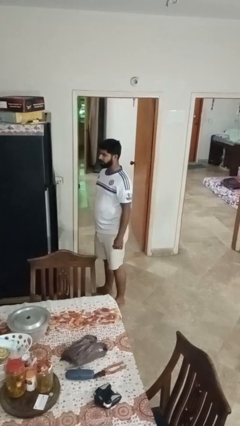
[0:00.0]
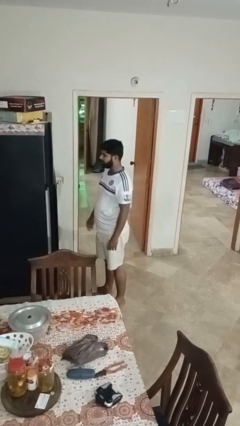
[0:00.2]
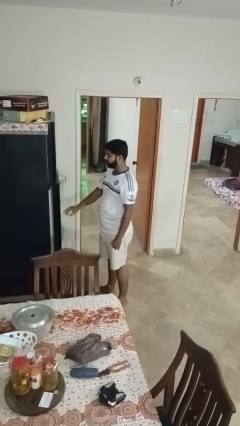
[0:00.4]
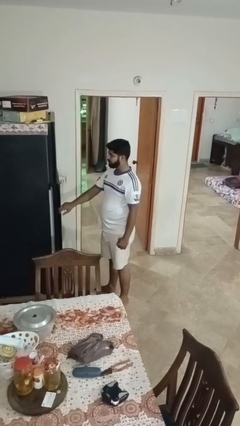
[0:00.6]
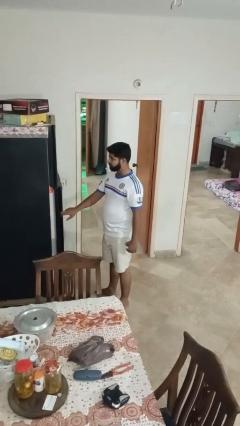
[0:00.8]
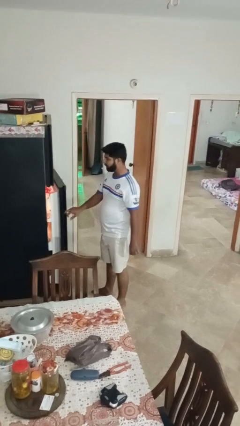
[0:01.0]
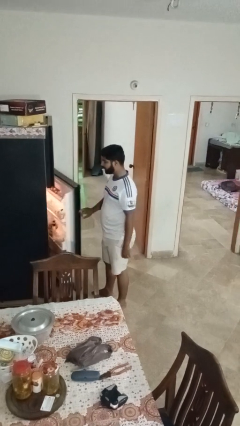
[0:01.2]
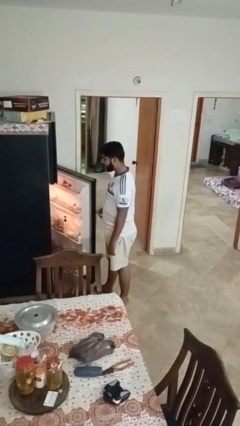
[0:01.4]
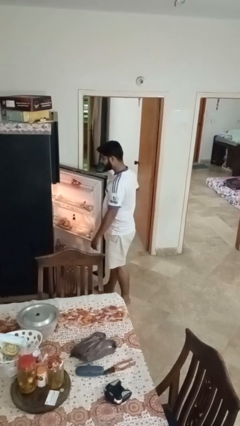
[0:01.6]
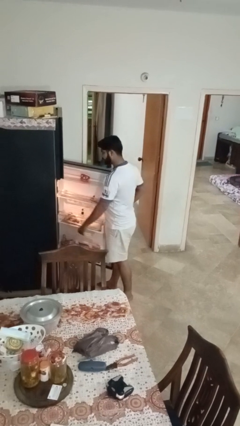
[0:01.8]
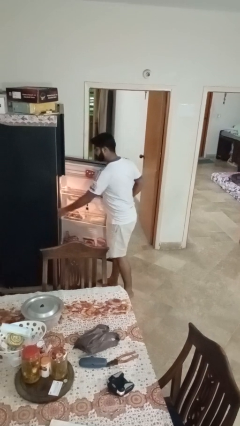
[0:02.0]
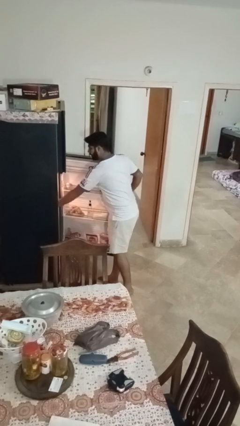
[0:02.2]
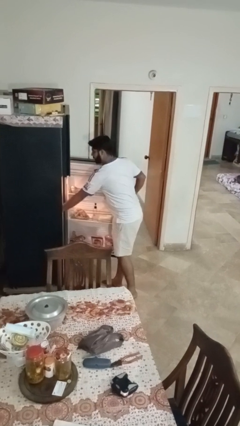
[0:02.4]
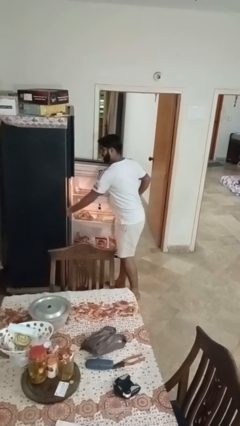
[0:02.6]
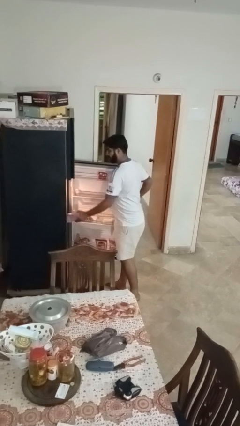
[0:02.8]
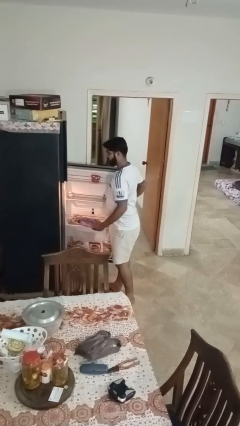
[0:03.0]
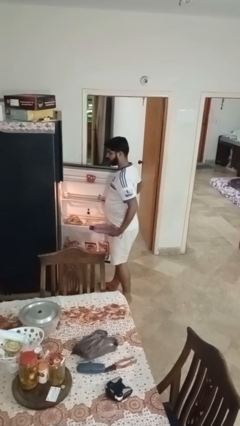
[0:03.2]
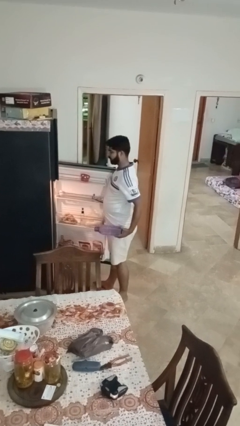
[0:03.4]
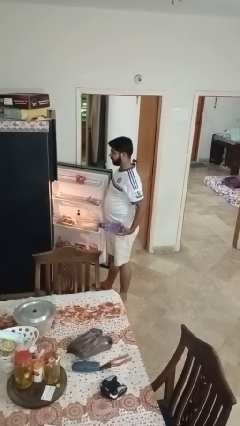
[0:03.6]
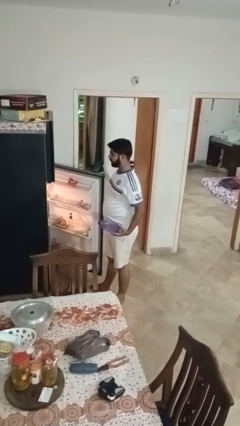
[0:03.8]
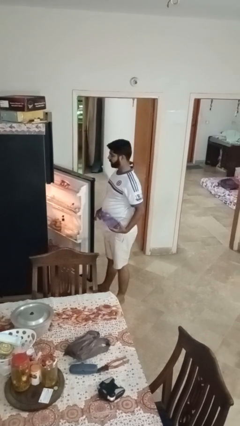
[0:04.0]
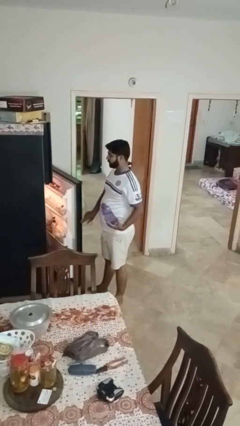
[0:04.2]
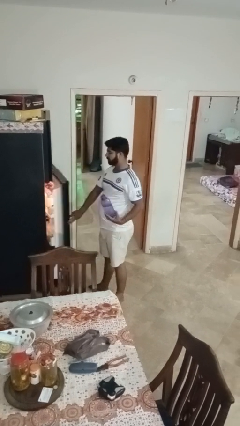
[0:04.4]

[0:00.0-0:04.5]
person takes object from refrigerator

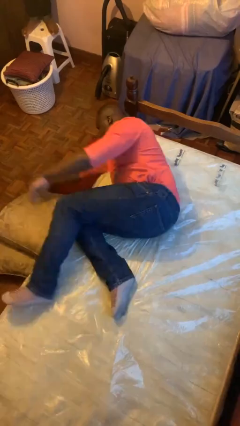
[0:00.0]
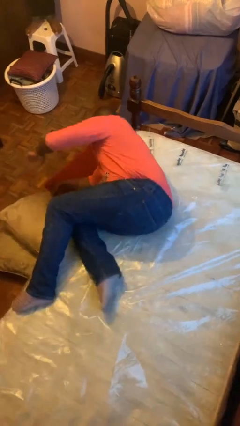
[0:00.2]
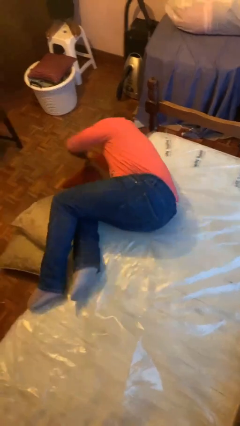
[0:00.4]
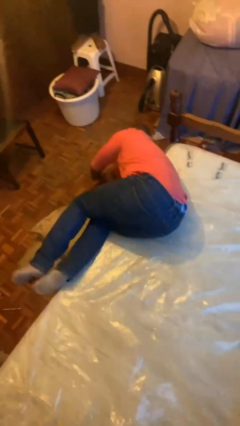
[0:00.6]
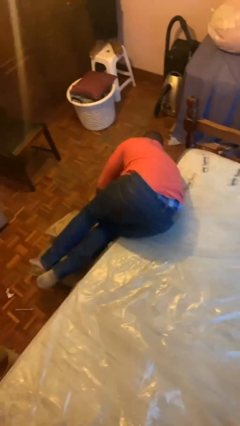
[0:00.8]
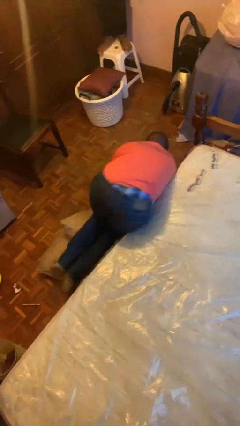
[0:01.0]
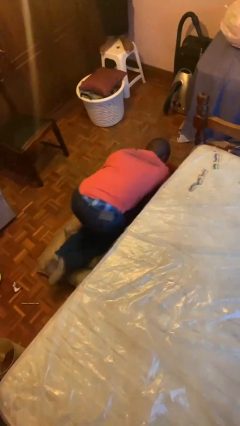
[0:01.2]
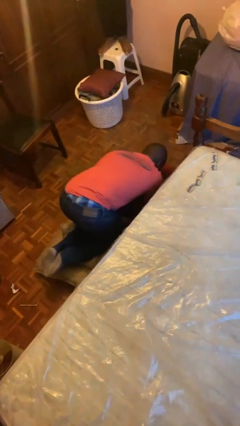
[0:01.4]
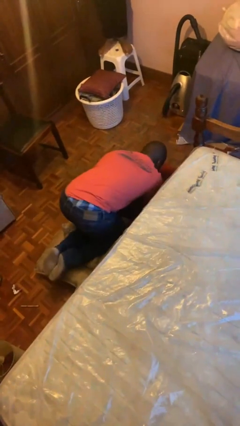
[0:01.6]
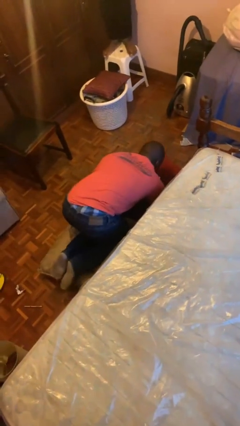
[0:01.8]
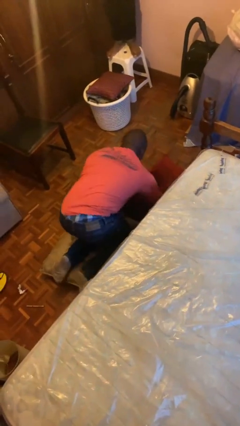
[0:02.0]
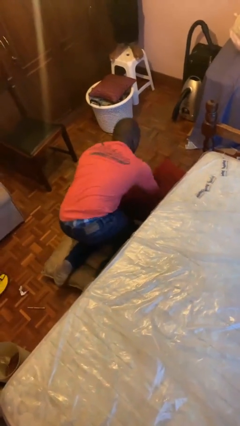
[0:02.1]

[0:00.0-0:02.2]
person falls from bed

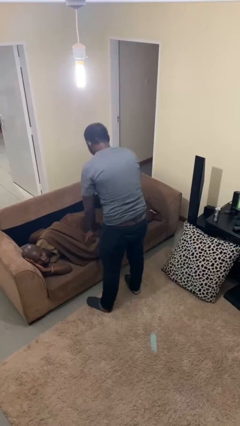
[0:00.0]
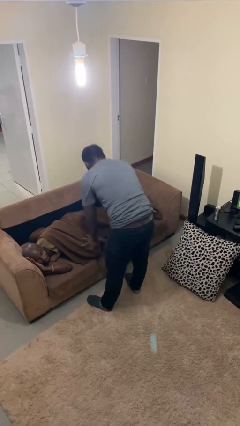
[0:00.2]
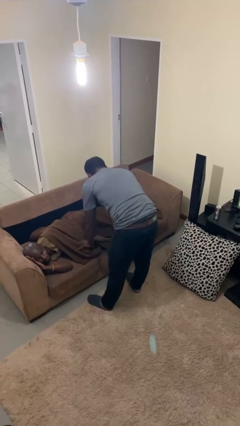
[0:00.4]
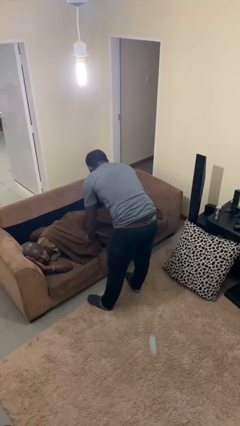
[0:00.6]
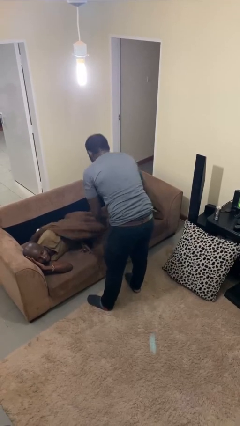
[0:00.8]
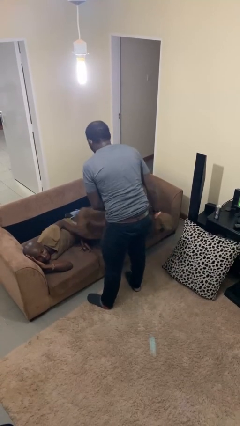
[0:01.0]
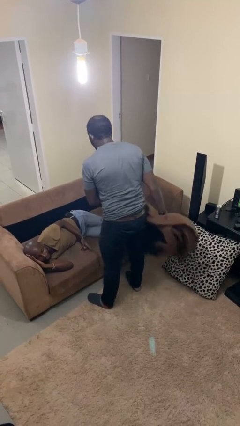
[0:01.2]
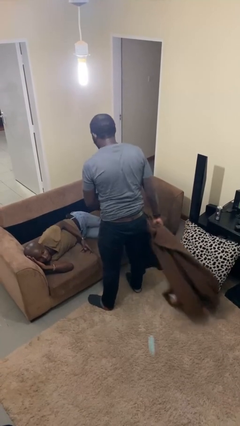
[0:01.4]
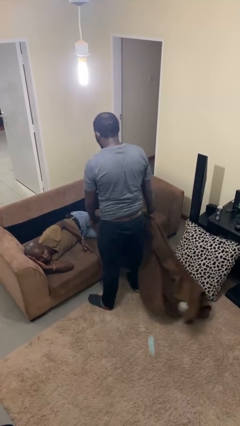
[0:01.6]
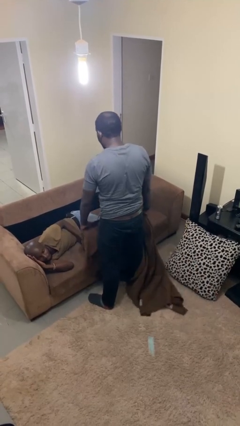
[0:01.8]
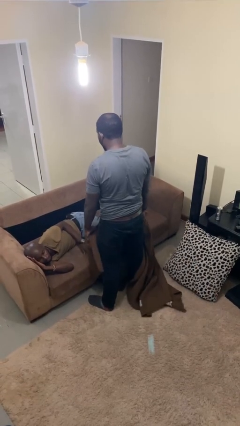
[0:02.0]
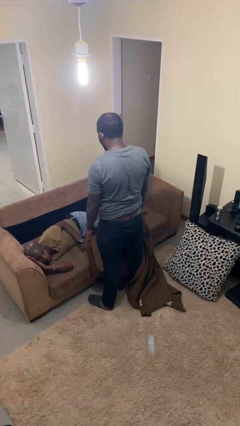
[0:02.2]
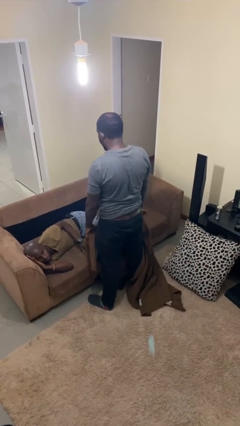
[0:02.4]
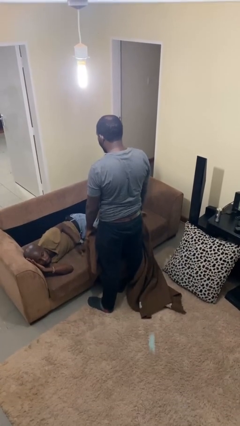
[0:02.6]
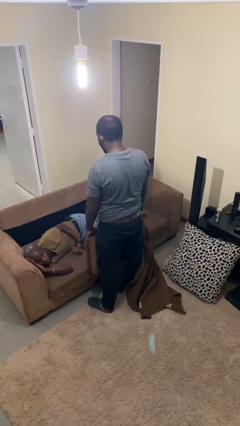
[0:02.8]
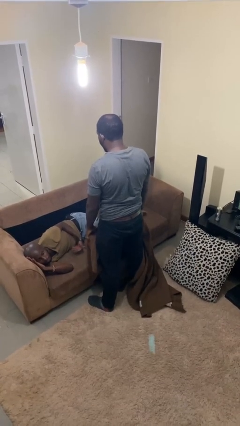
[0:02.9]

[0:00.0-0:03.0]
person uncovers friend with blanket

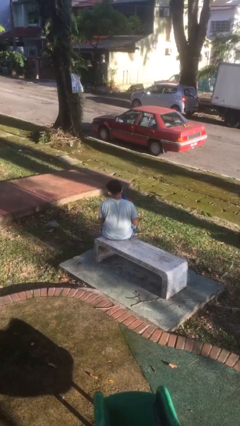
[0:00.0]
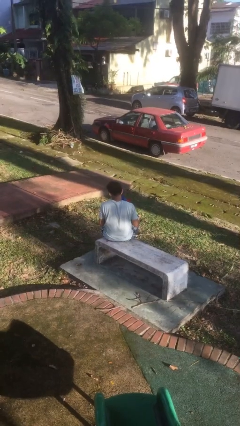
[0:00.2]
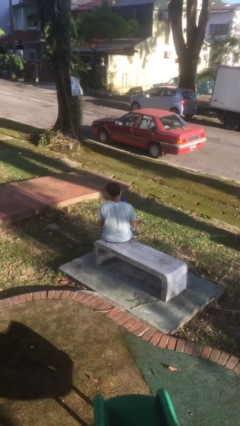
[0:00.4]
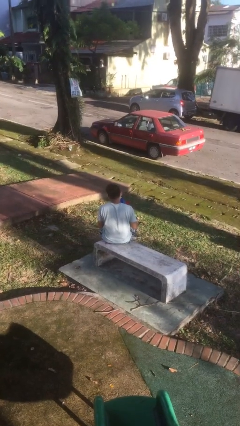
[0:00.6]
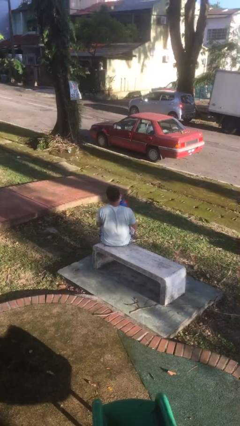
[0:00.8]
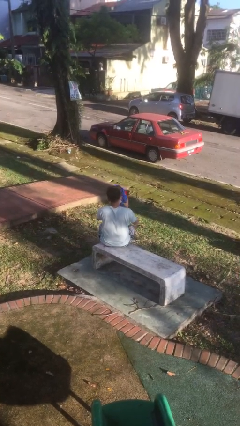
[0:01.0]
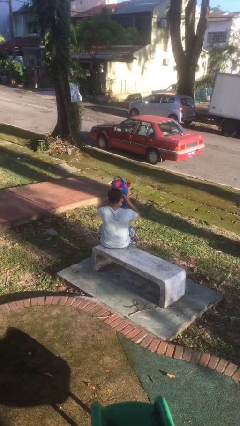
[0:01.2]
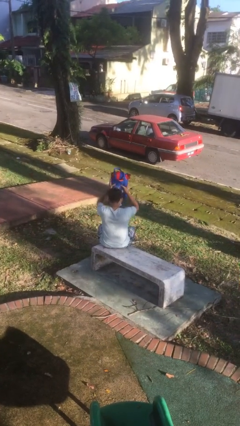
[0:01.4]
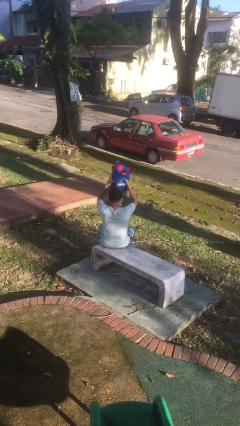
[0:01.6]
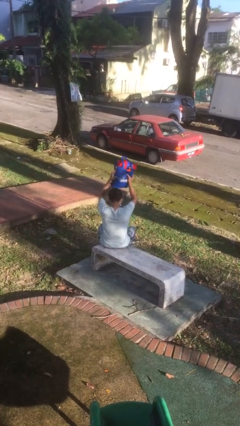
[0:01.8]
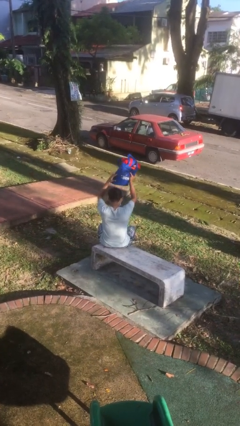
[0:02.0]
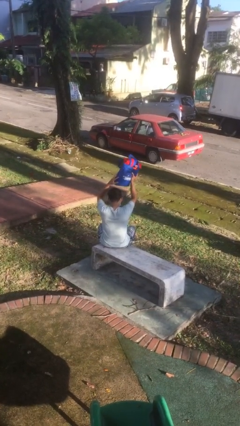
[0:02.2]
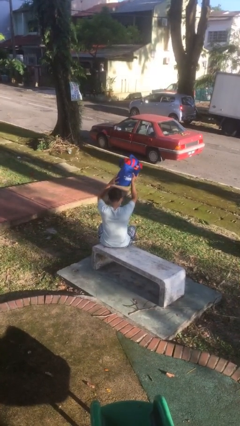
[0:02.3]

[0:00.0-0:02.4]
person holds object above head

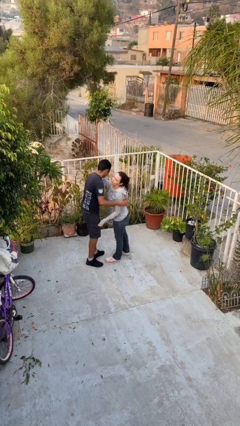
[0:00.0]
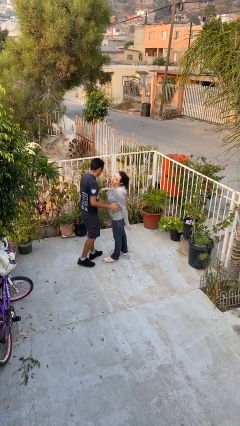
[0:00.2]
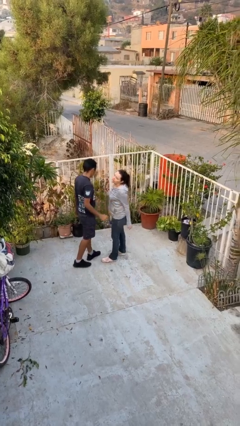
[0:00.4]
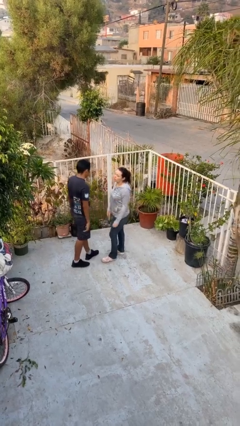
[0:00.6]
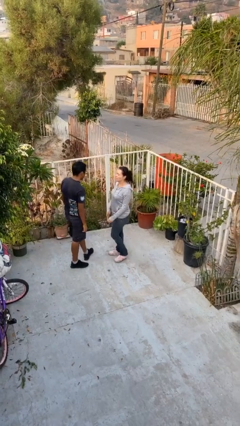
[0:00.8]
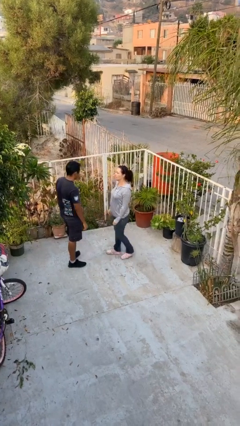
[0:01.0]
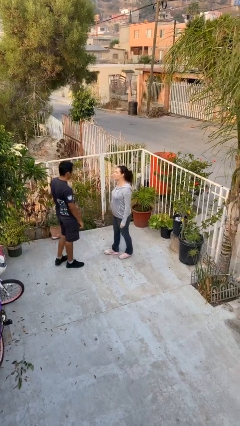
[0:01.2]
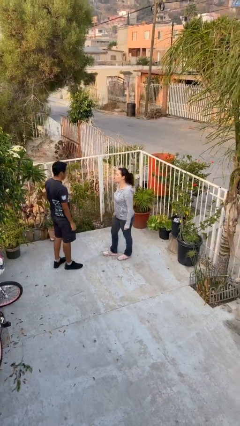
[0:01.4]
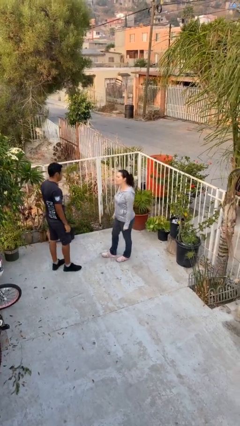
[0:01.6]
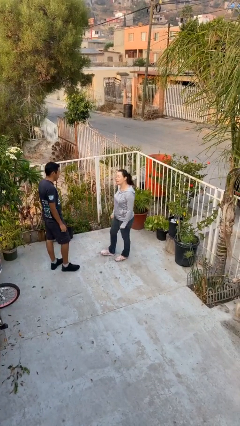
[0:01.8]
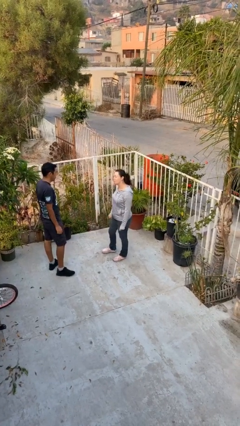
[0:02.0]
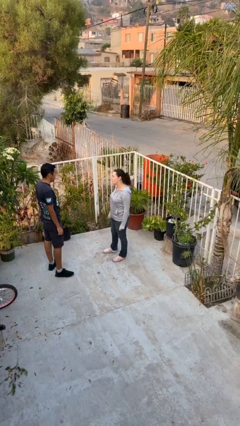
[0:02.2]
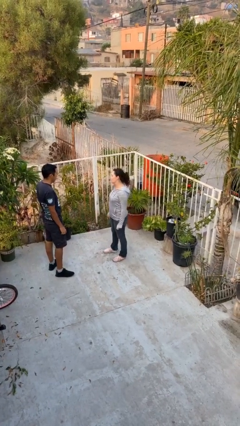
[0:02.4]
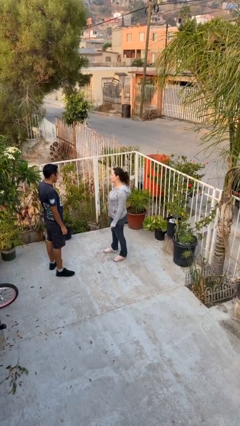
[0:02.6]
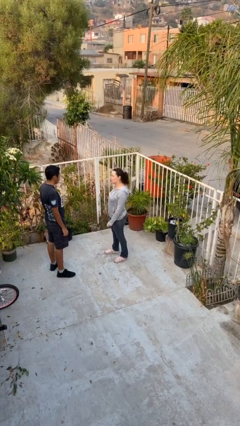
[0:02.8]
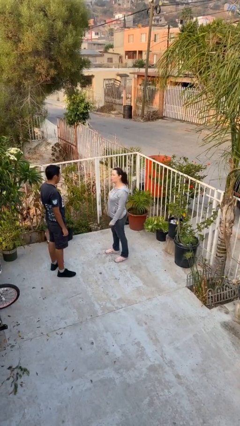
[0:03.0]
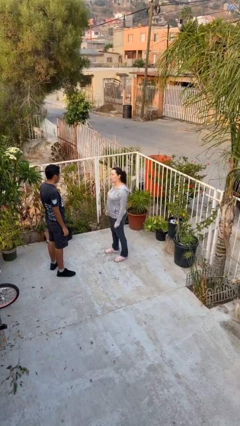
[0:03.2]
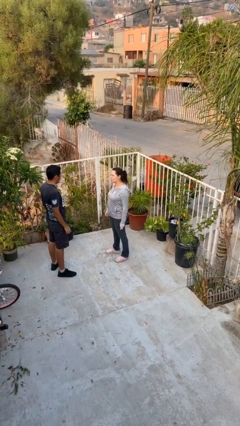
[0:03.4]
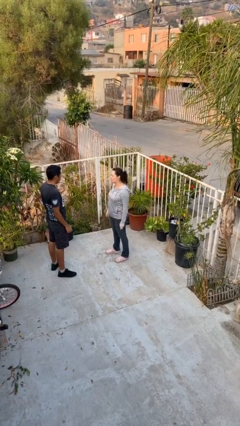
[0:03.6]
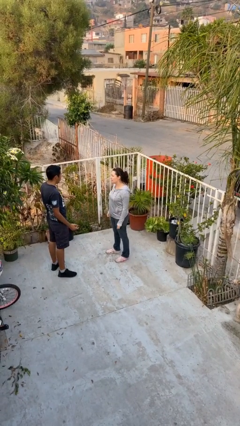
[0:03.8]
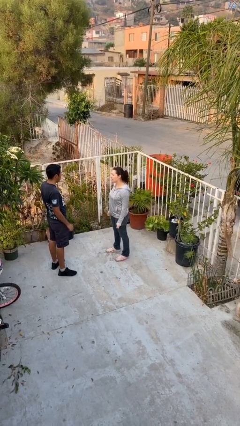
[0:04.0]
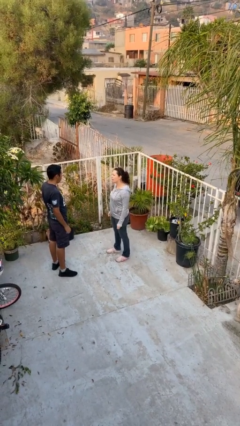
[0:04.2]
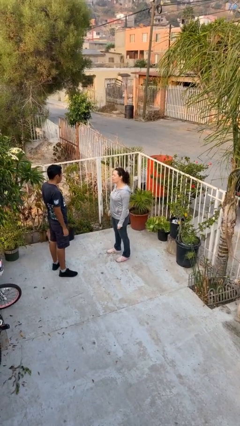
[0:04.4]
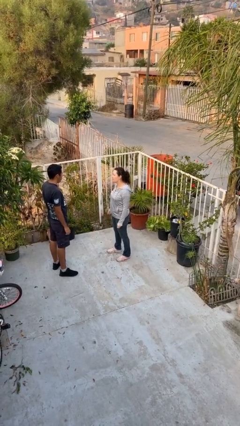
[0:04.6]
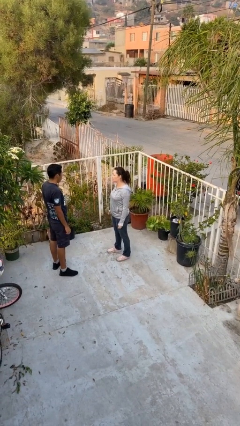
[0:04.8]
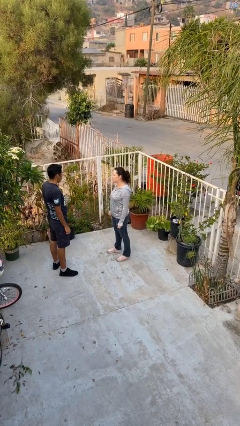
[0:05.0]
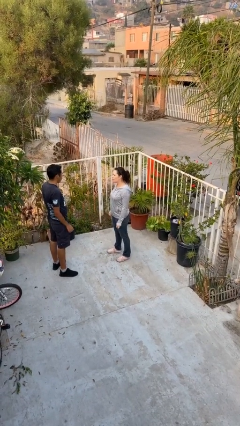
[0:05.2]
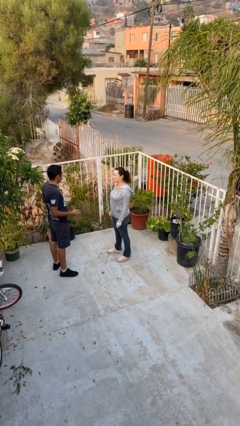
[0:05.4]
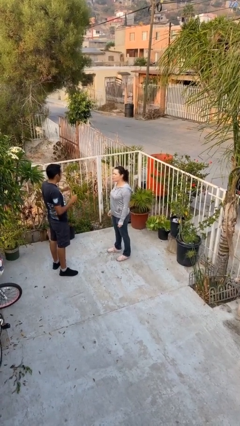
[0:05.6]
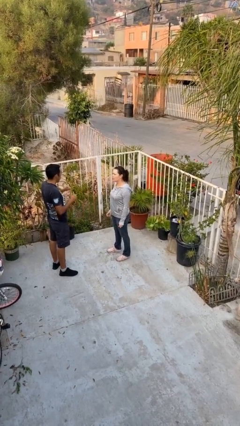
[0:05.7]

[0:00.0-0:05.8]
person talks to person
